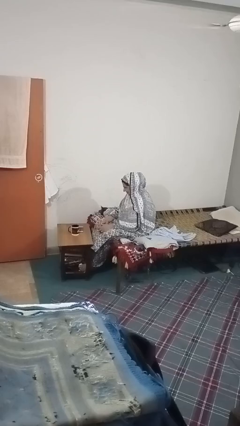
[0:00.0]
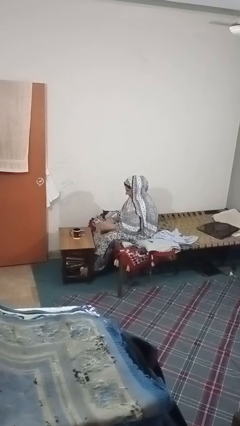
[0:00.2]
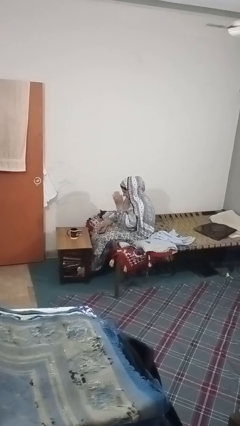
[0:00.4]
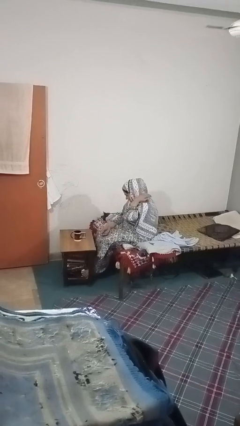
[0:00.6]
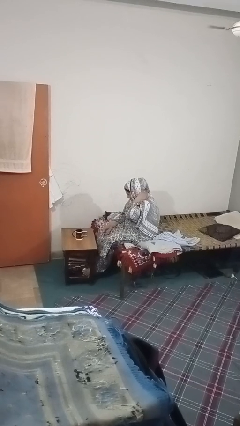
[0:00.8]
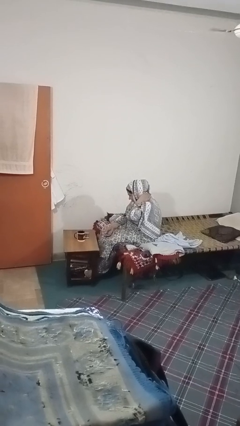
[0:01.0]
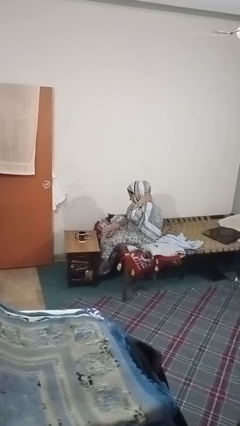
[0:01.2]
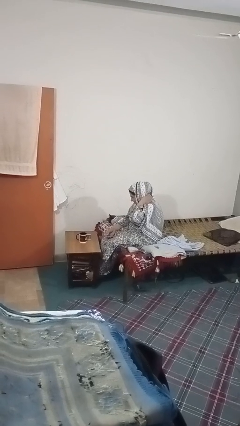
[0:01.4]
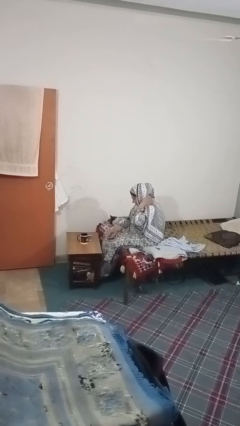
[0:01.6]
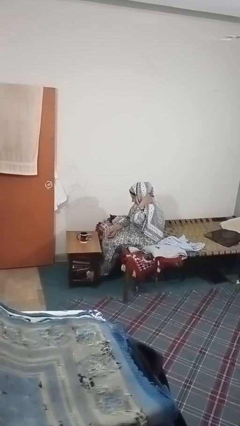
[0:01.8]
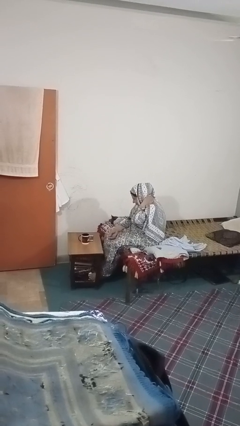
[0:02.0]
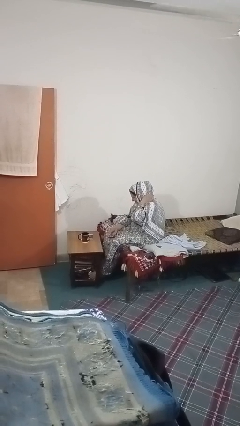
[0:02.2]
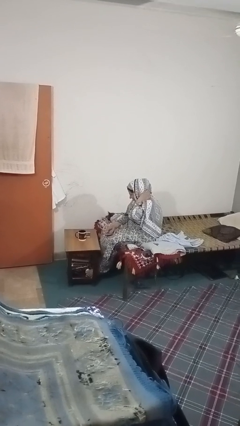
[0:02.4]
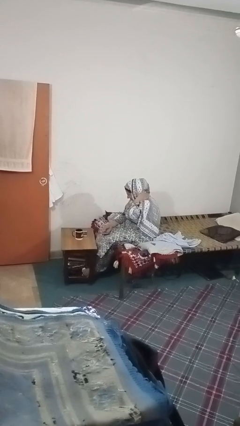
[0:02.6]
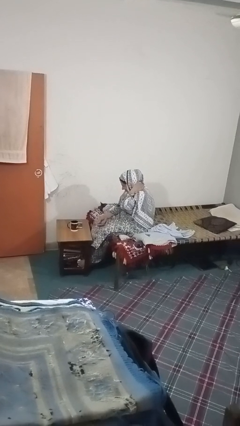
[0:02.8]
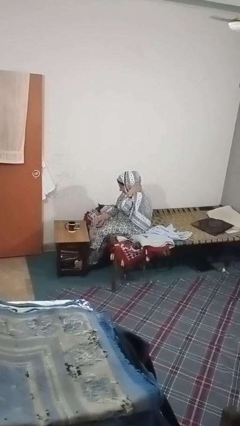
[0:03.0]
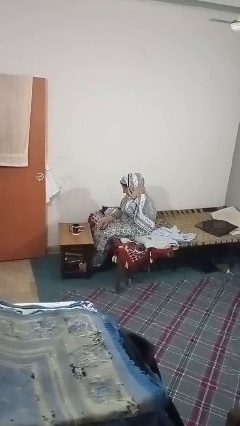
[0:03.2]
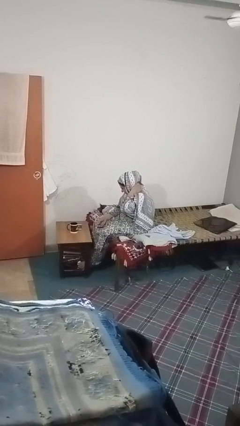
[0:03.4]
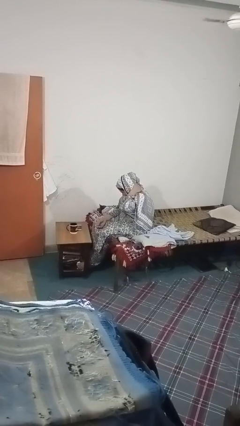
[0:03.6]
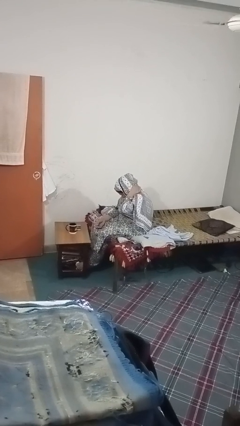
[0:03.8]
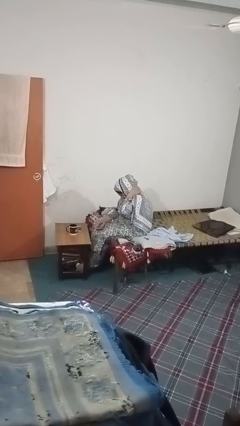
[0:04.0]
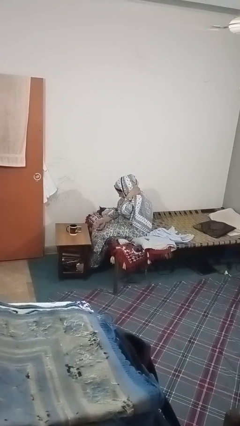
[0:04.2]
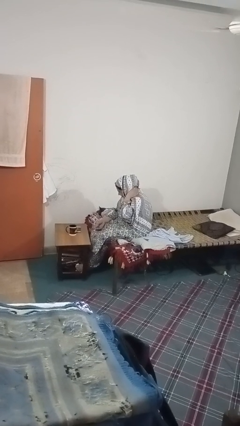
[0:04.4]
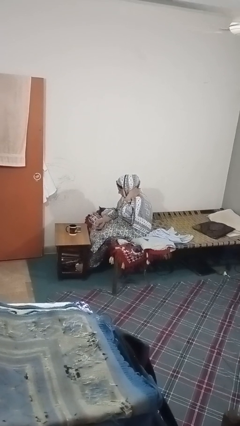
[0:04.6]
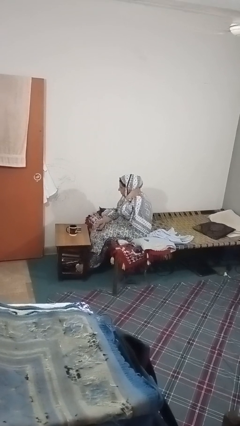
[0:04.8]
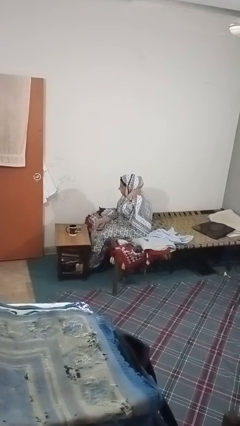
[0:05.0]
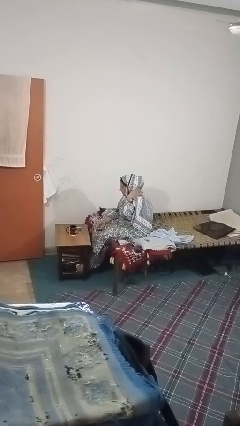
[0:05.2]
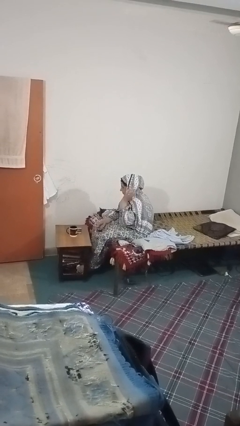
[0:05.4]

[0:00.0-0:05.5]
person rubs neck

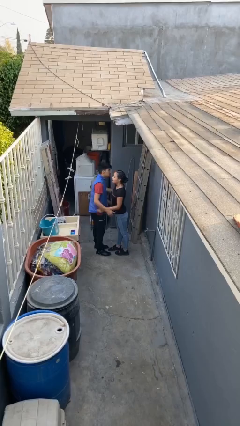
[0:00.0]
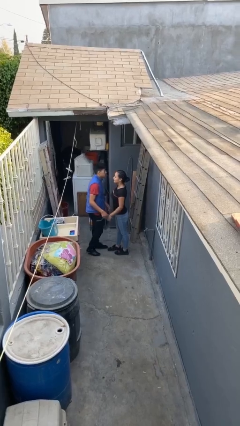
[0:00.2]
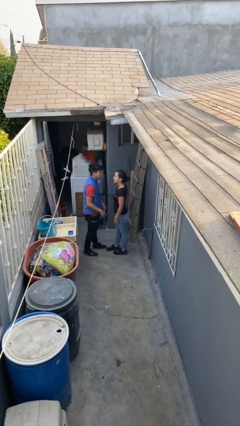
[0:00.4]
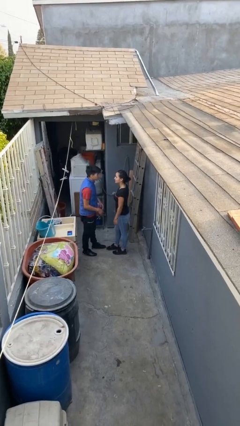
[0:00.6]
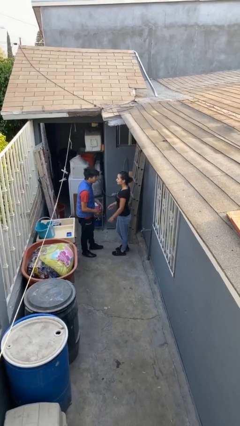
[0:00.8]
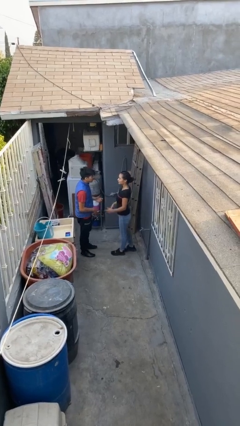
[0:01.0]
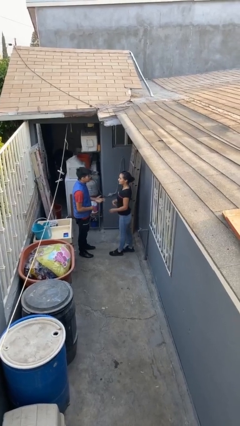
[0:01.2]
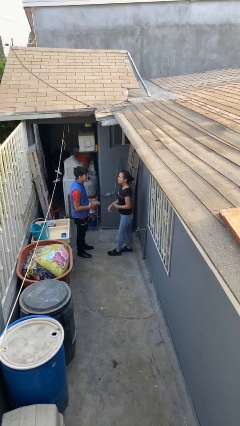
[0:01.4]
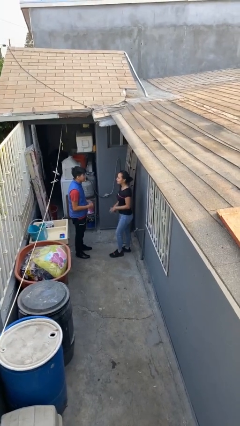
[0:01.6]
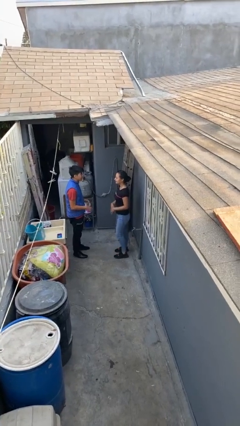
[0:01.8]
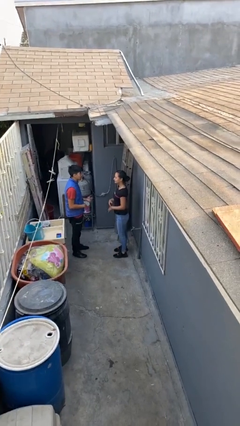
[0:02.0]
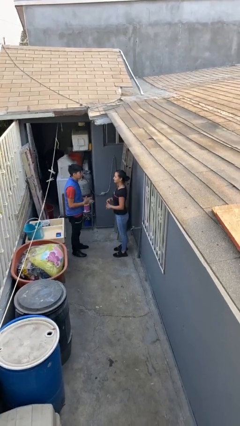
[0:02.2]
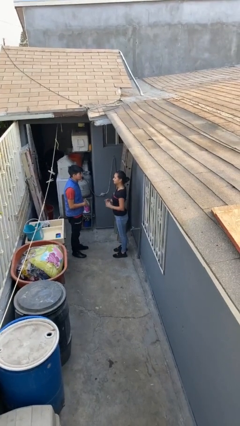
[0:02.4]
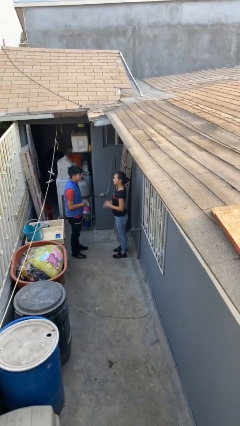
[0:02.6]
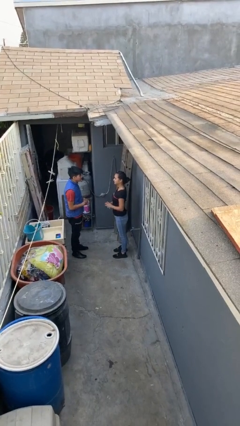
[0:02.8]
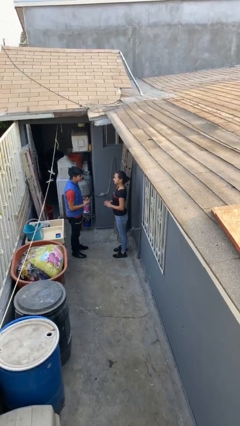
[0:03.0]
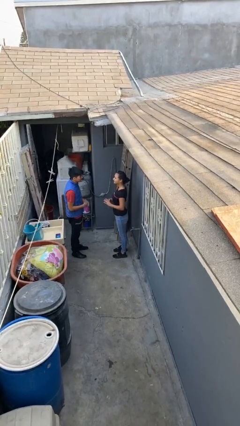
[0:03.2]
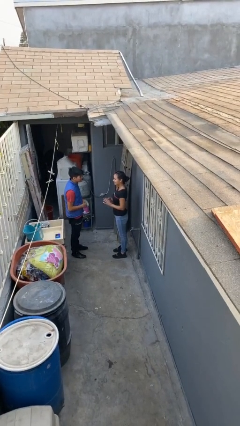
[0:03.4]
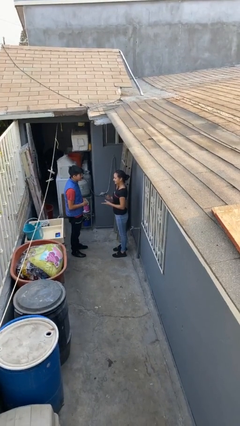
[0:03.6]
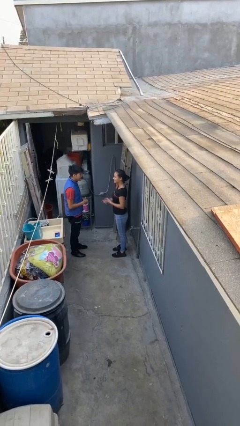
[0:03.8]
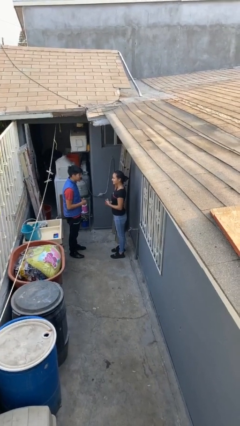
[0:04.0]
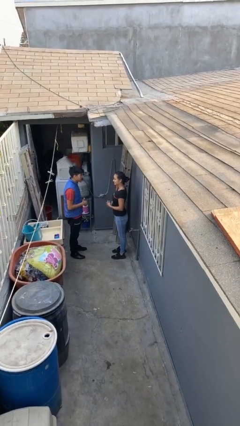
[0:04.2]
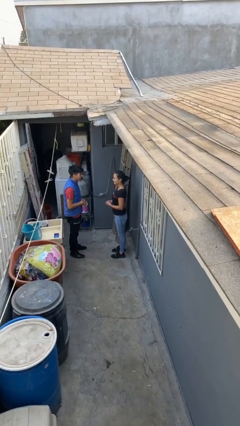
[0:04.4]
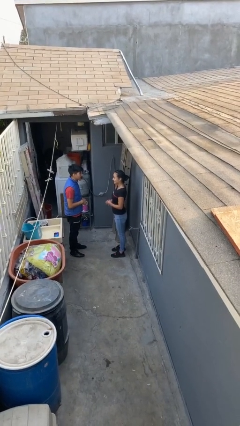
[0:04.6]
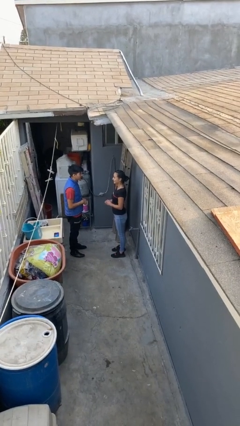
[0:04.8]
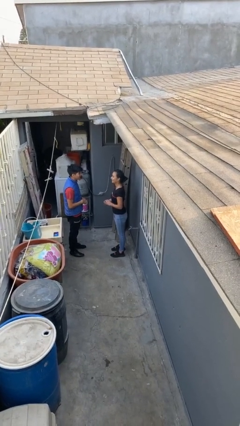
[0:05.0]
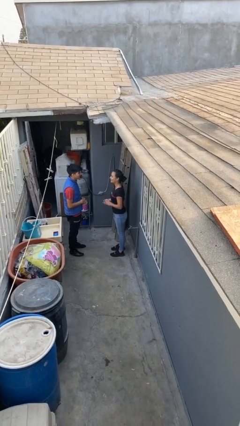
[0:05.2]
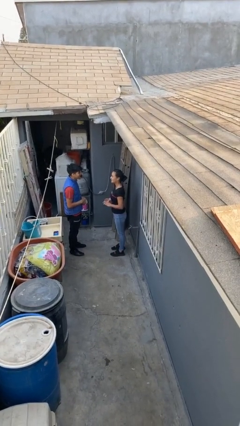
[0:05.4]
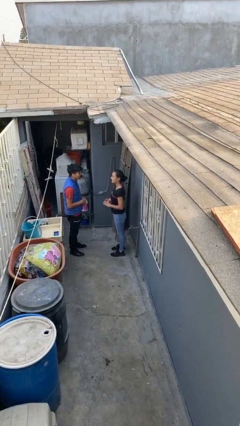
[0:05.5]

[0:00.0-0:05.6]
person talks to person

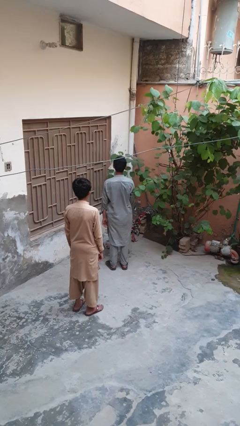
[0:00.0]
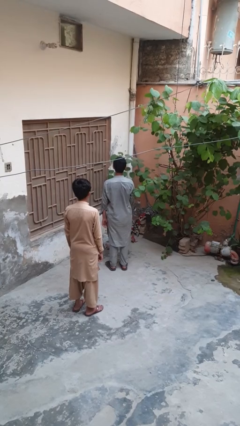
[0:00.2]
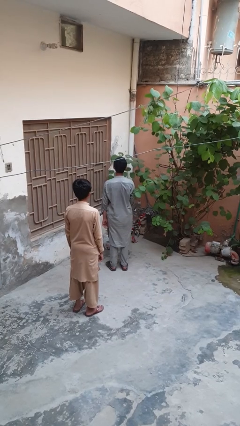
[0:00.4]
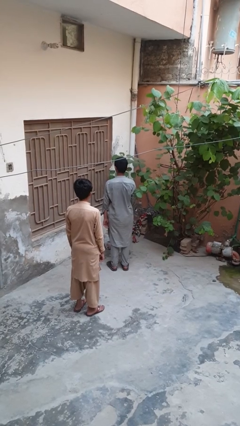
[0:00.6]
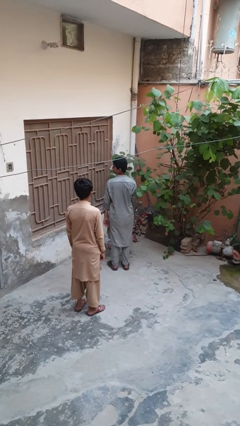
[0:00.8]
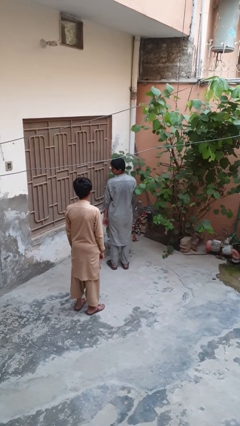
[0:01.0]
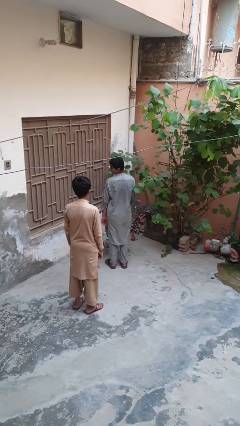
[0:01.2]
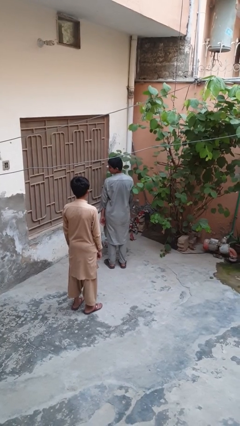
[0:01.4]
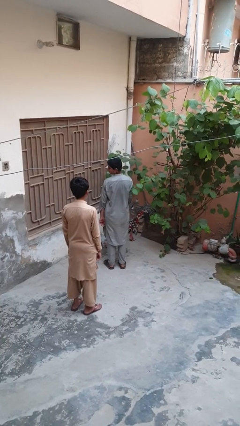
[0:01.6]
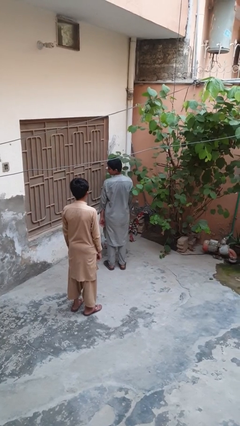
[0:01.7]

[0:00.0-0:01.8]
person looks over shoulder

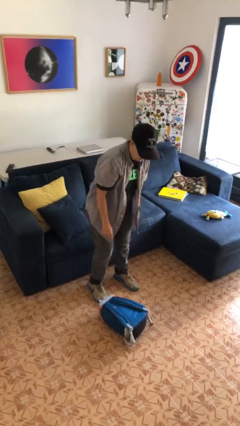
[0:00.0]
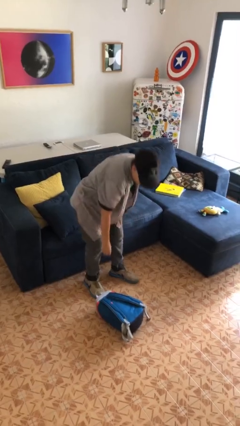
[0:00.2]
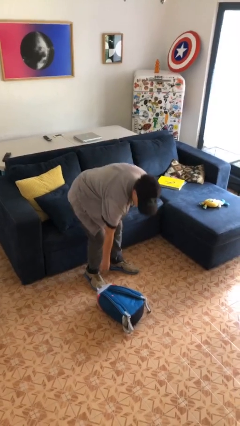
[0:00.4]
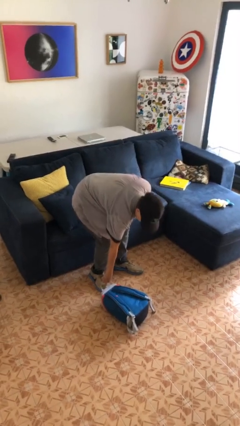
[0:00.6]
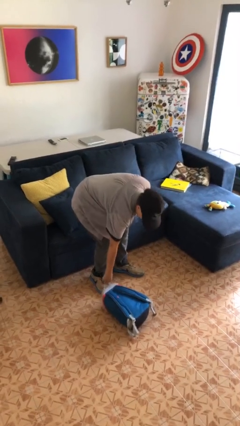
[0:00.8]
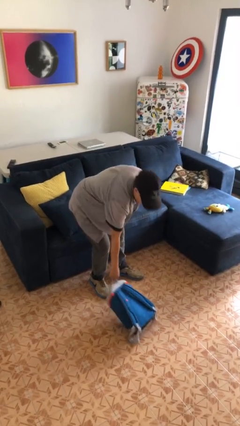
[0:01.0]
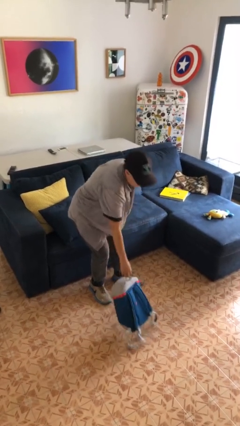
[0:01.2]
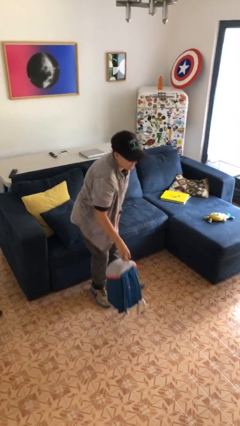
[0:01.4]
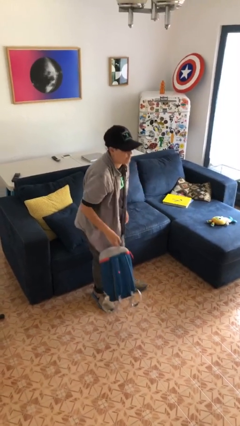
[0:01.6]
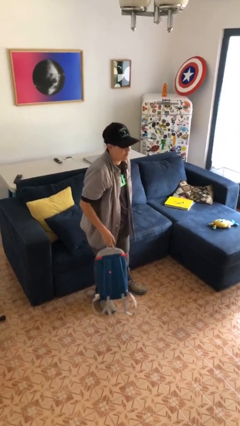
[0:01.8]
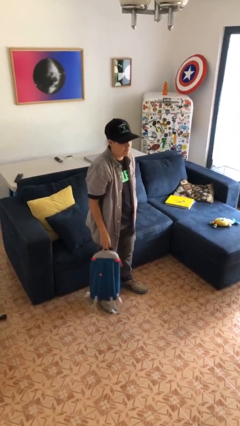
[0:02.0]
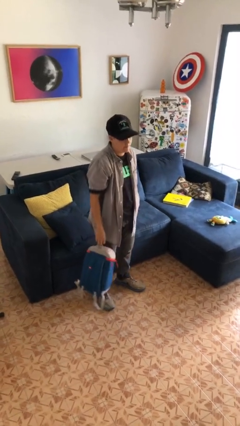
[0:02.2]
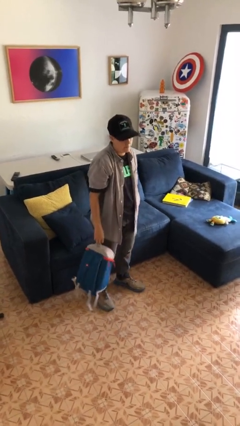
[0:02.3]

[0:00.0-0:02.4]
person picks up object from floor

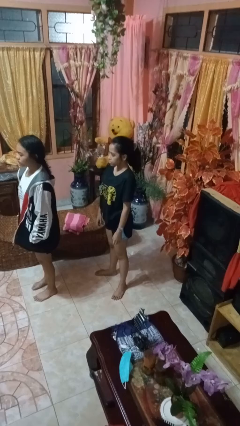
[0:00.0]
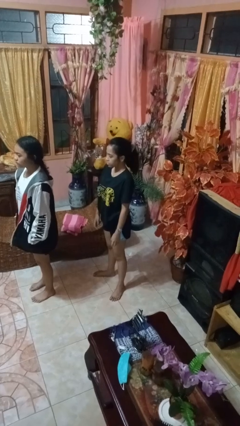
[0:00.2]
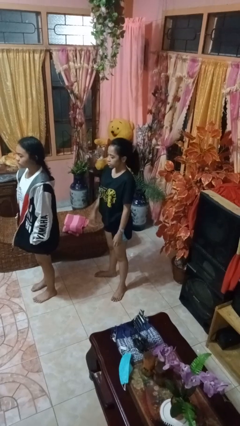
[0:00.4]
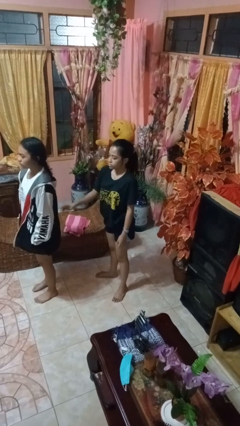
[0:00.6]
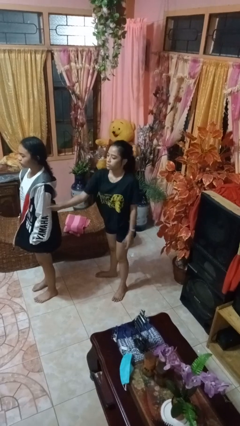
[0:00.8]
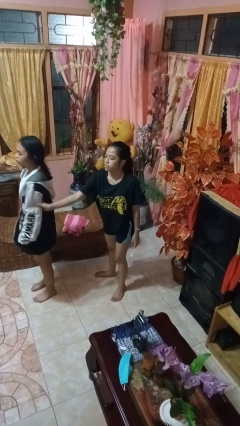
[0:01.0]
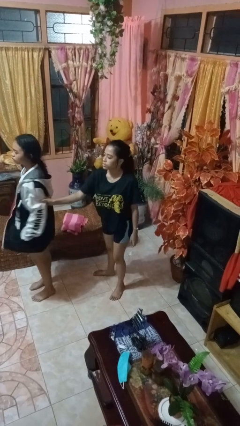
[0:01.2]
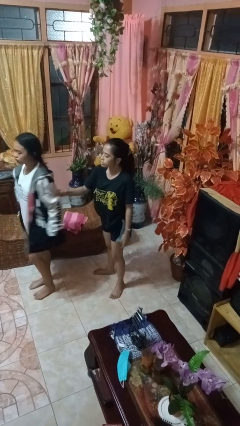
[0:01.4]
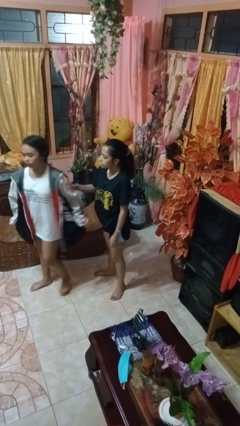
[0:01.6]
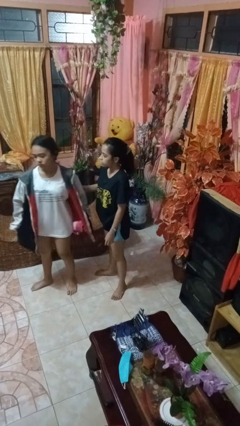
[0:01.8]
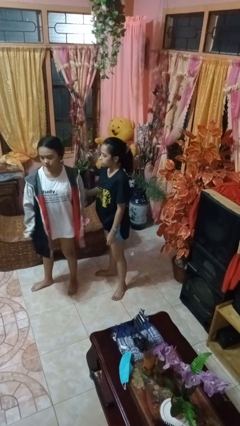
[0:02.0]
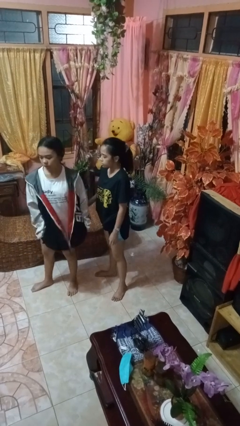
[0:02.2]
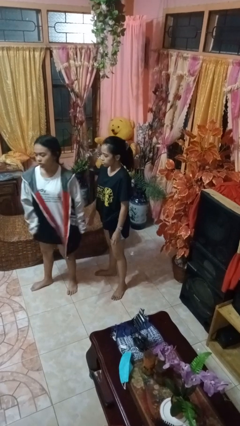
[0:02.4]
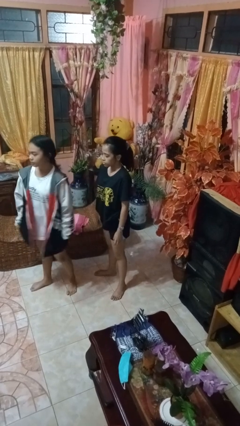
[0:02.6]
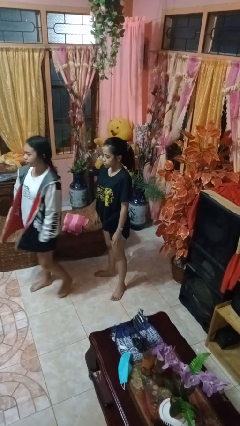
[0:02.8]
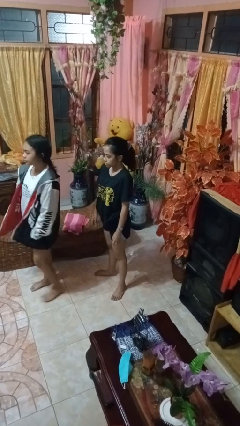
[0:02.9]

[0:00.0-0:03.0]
person grabs person by bicep
